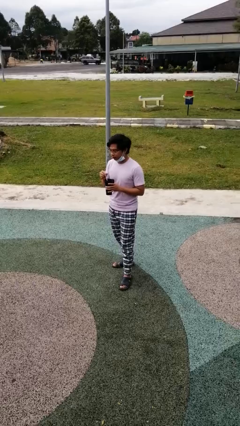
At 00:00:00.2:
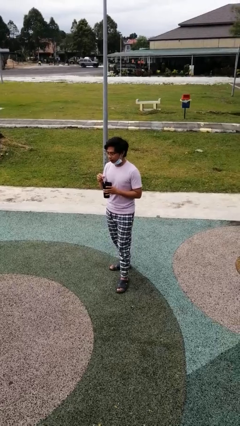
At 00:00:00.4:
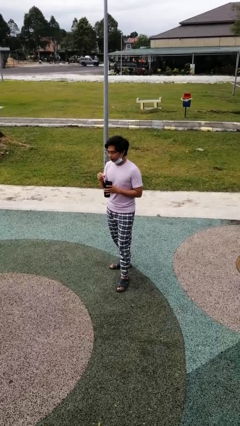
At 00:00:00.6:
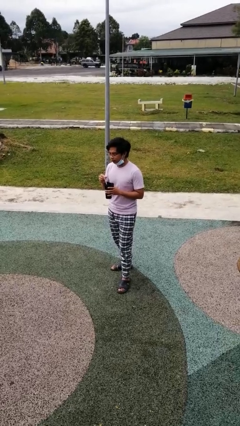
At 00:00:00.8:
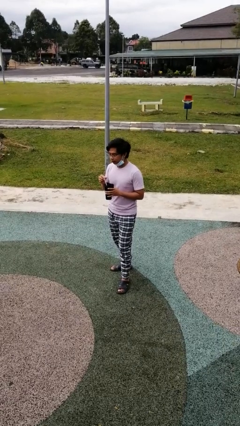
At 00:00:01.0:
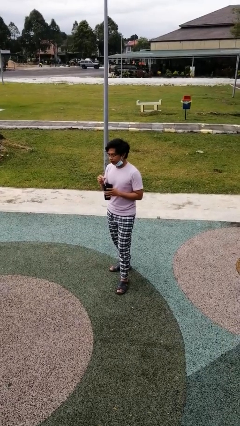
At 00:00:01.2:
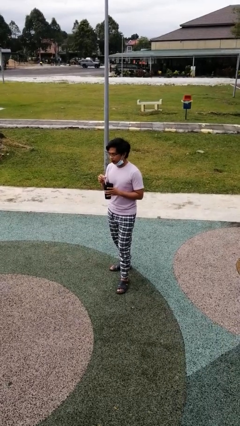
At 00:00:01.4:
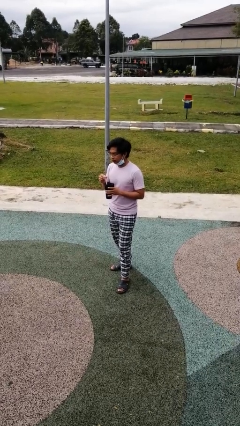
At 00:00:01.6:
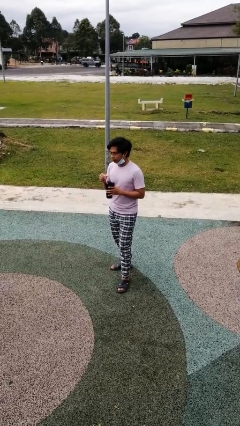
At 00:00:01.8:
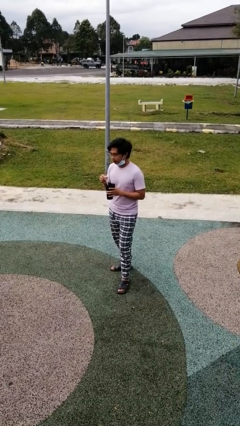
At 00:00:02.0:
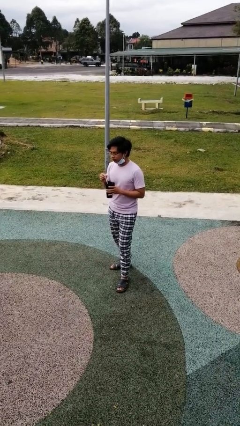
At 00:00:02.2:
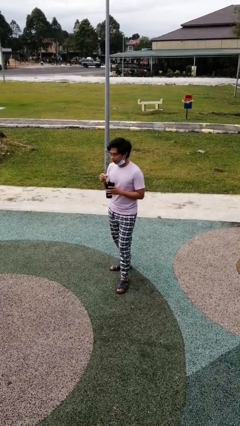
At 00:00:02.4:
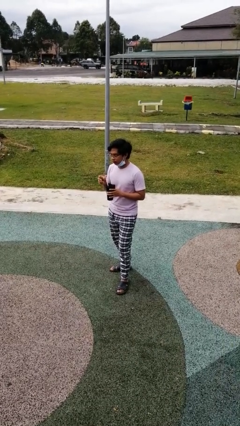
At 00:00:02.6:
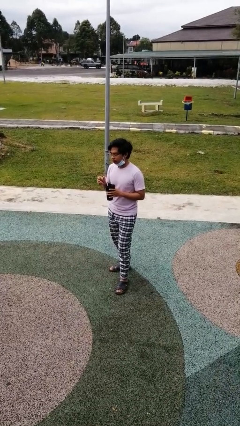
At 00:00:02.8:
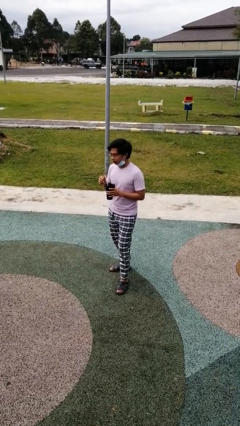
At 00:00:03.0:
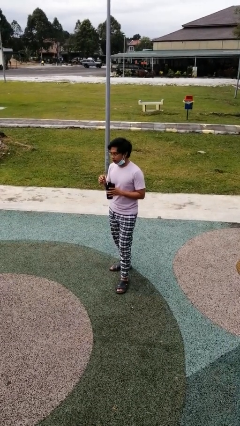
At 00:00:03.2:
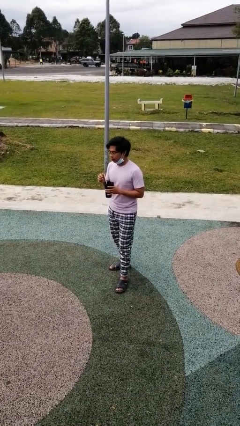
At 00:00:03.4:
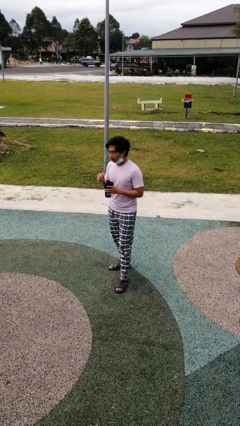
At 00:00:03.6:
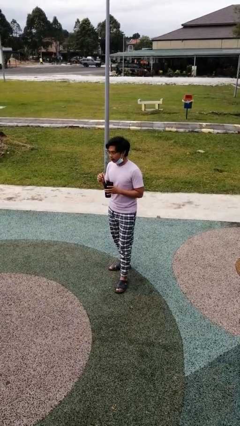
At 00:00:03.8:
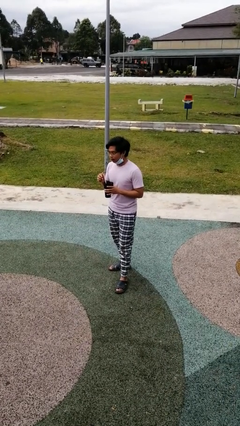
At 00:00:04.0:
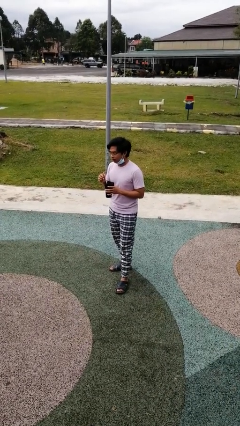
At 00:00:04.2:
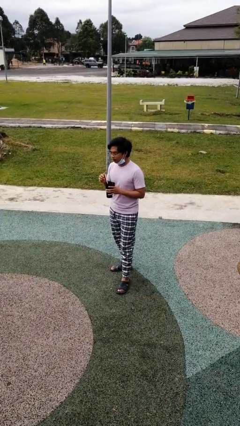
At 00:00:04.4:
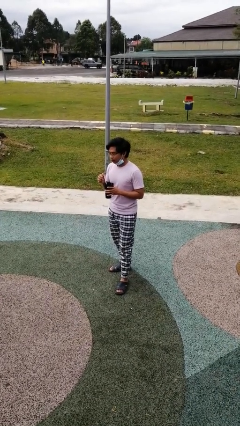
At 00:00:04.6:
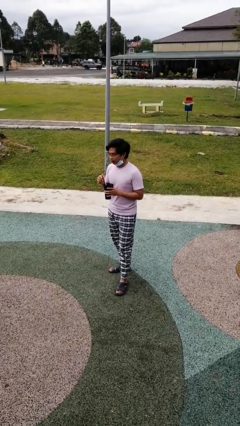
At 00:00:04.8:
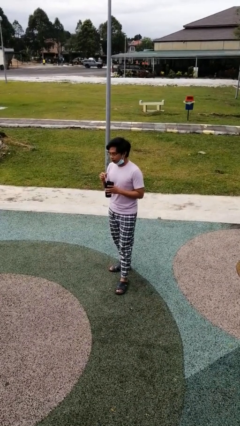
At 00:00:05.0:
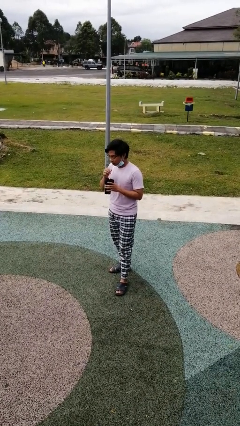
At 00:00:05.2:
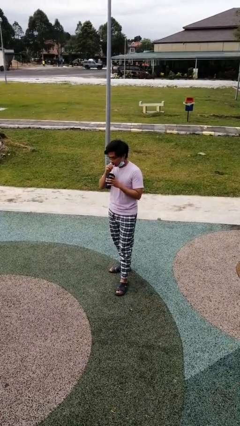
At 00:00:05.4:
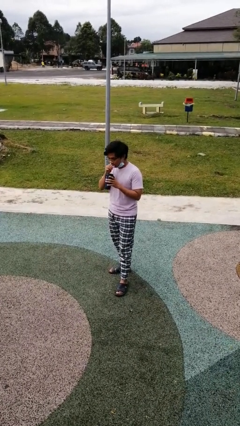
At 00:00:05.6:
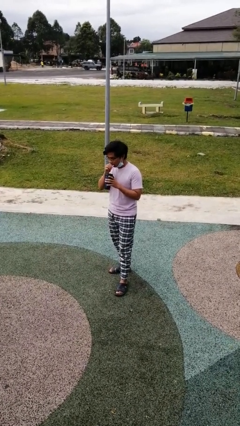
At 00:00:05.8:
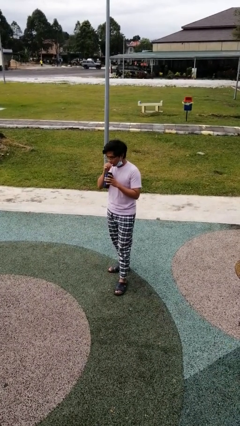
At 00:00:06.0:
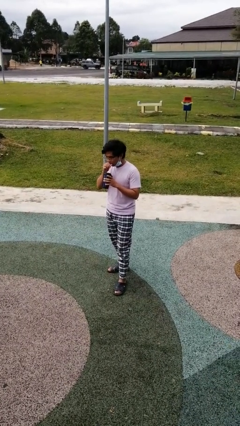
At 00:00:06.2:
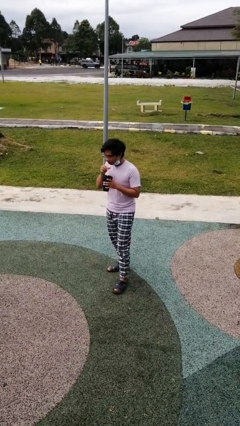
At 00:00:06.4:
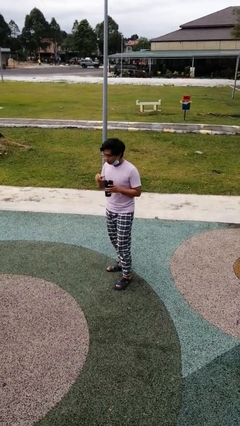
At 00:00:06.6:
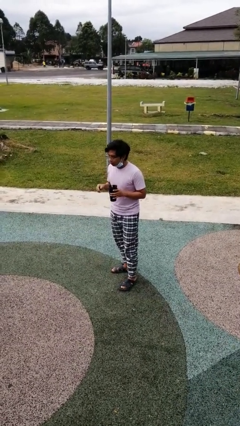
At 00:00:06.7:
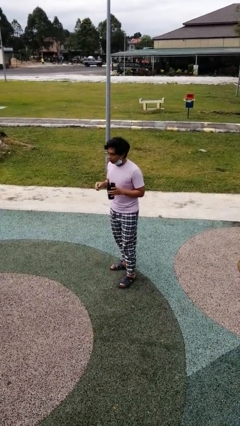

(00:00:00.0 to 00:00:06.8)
person drinks from straw

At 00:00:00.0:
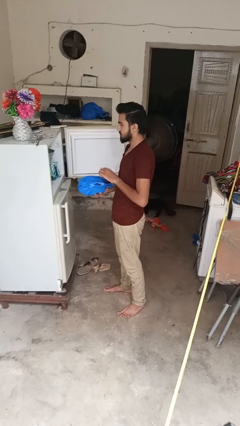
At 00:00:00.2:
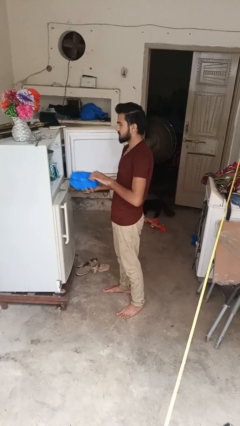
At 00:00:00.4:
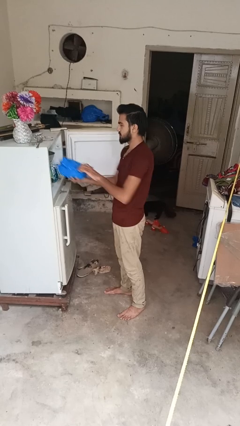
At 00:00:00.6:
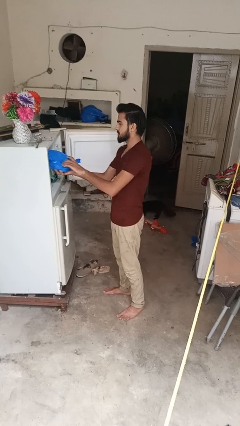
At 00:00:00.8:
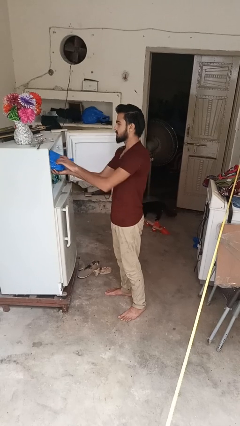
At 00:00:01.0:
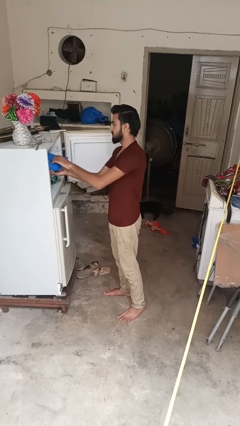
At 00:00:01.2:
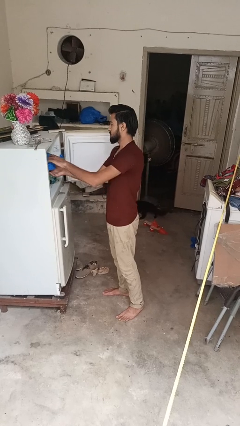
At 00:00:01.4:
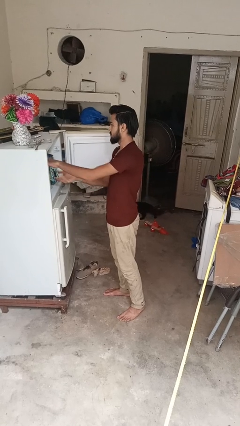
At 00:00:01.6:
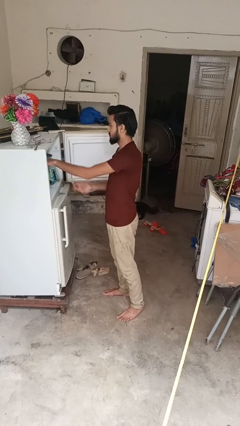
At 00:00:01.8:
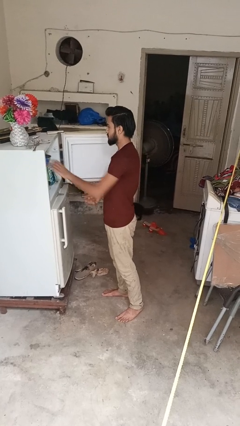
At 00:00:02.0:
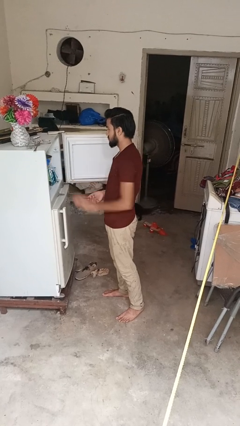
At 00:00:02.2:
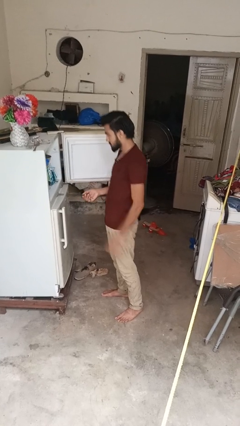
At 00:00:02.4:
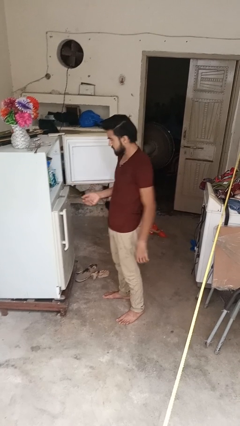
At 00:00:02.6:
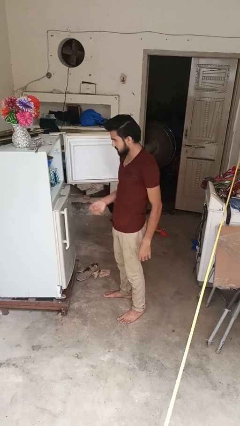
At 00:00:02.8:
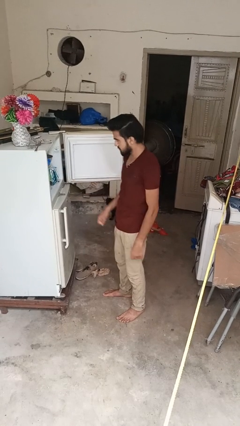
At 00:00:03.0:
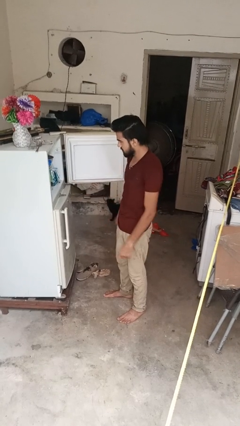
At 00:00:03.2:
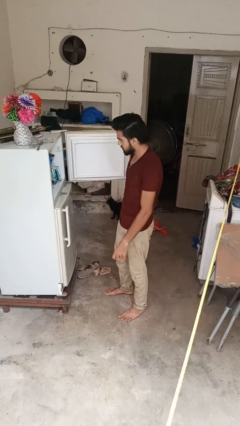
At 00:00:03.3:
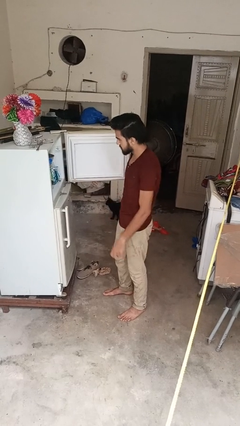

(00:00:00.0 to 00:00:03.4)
person loads groceries into refrigerator

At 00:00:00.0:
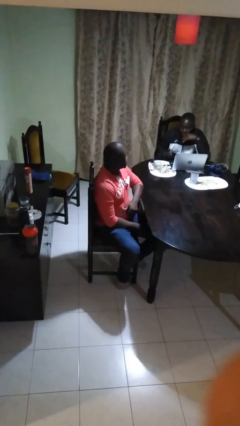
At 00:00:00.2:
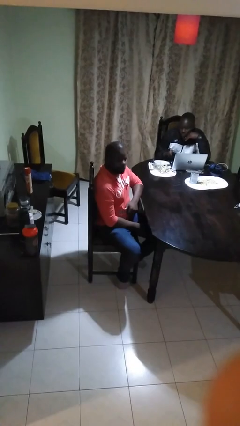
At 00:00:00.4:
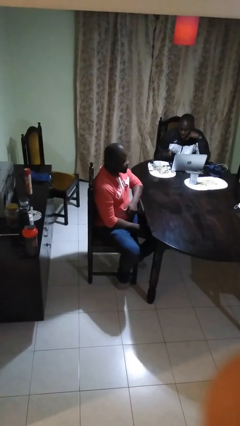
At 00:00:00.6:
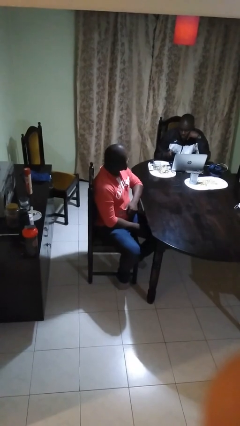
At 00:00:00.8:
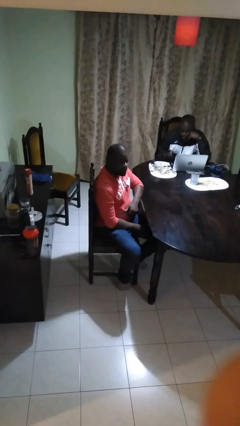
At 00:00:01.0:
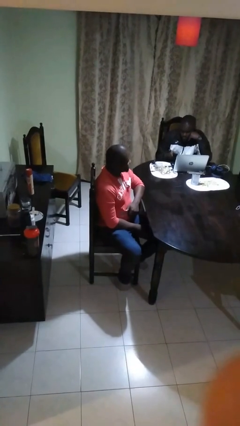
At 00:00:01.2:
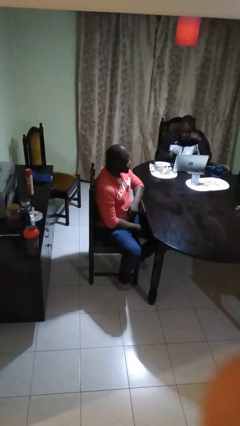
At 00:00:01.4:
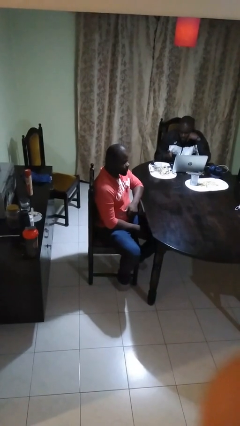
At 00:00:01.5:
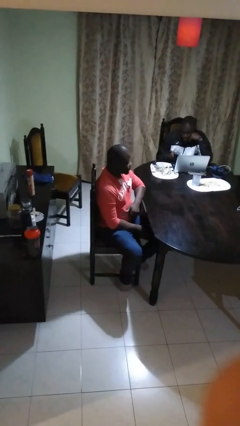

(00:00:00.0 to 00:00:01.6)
person shakes head

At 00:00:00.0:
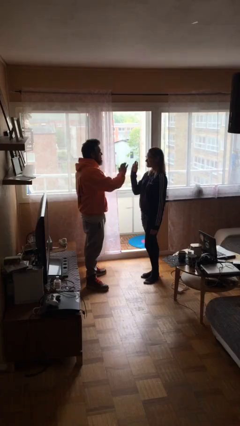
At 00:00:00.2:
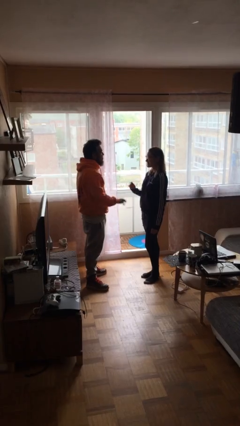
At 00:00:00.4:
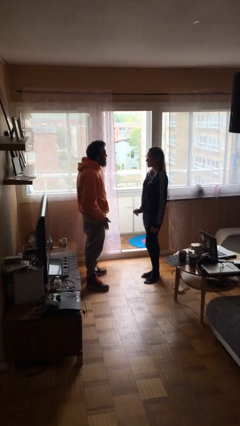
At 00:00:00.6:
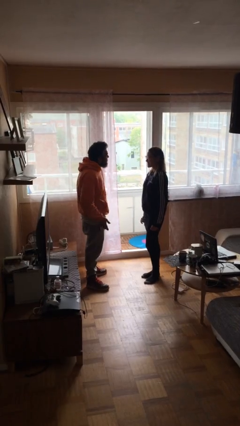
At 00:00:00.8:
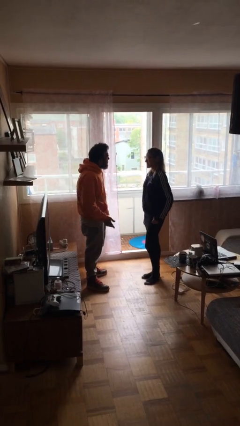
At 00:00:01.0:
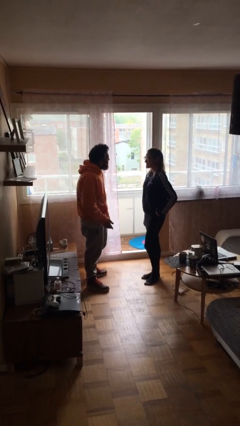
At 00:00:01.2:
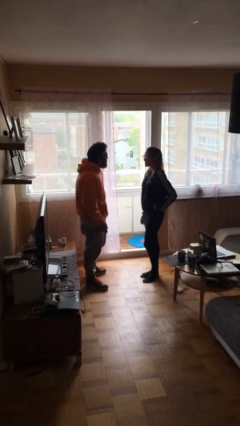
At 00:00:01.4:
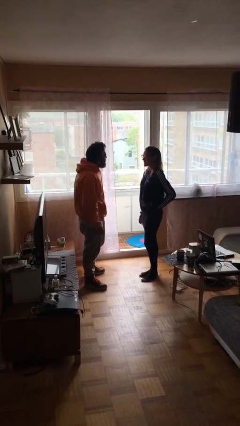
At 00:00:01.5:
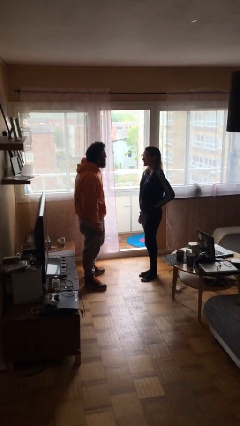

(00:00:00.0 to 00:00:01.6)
person highfives hand

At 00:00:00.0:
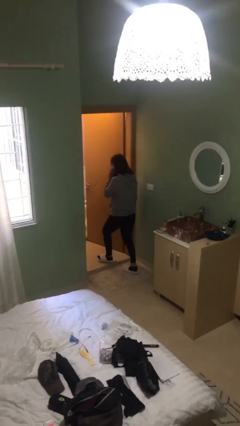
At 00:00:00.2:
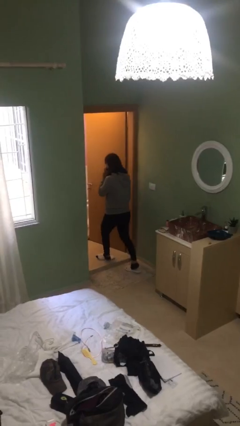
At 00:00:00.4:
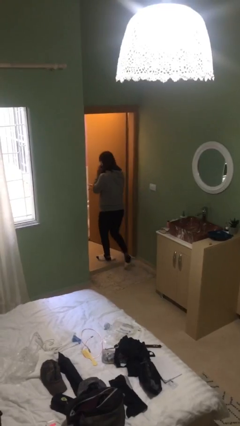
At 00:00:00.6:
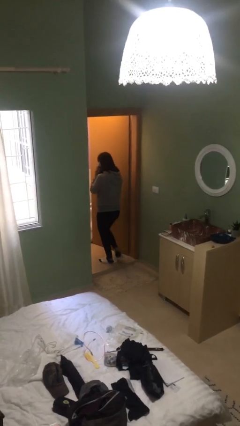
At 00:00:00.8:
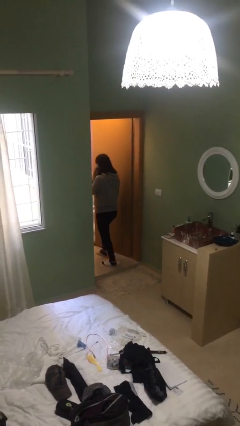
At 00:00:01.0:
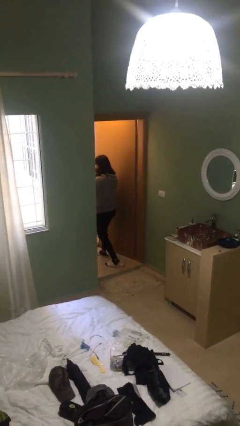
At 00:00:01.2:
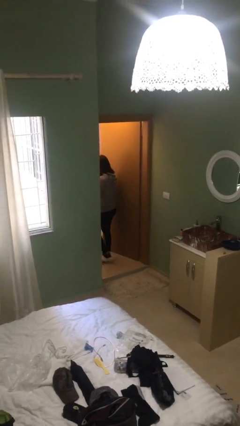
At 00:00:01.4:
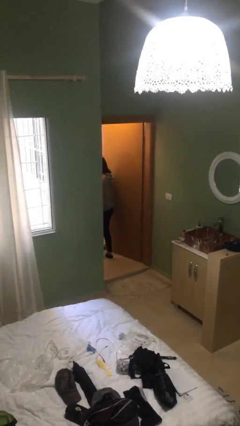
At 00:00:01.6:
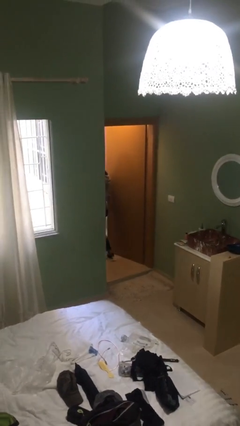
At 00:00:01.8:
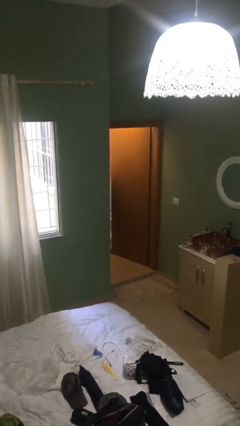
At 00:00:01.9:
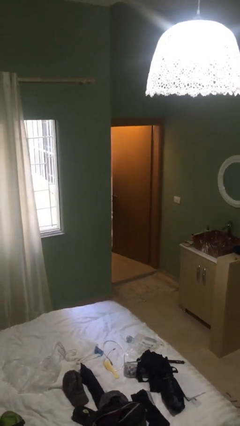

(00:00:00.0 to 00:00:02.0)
person exits scene through structure

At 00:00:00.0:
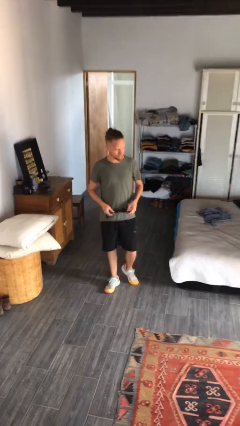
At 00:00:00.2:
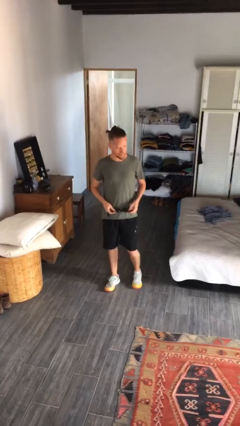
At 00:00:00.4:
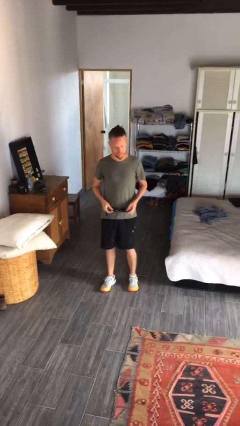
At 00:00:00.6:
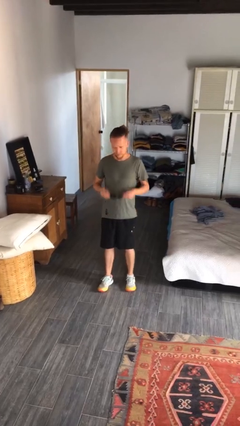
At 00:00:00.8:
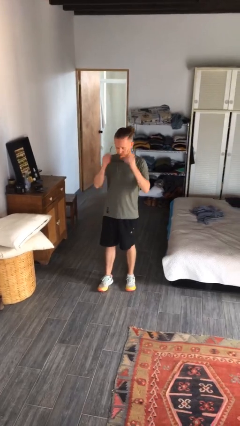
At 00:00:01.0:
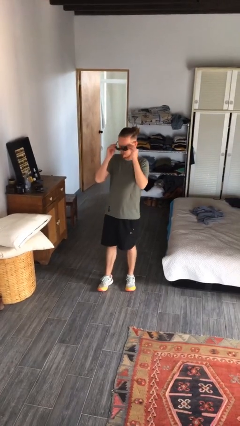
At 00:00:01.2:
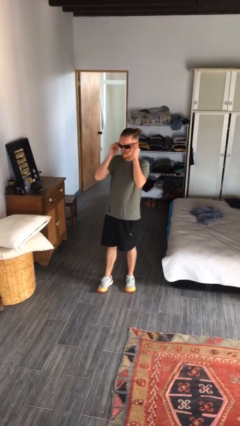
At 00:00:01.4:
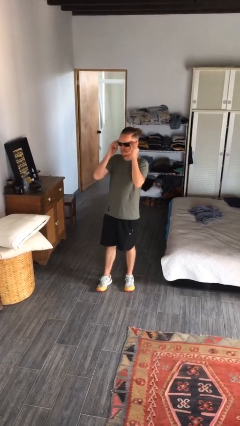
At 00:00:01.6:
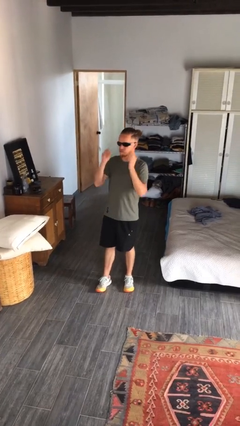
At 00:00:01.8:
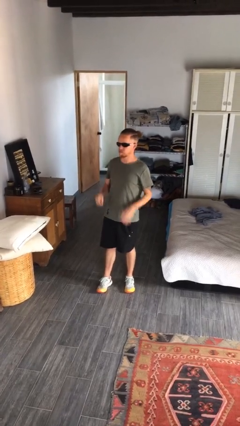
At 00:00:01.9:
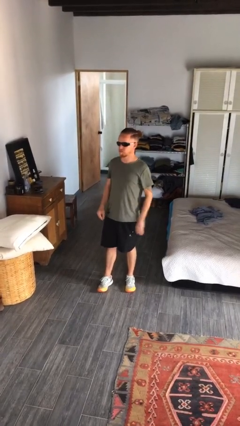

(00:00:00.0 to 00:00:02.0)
person puts on sunglasses
